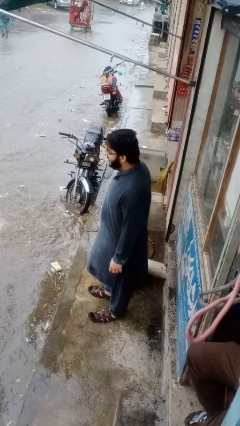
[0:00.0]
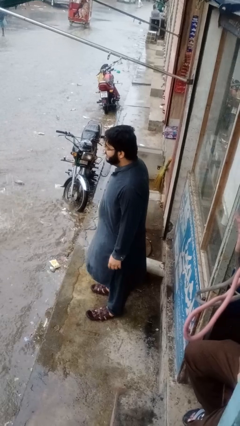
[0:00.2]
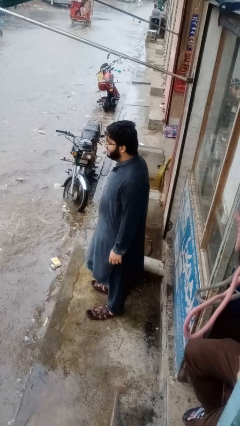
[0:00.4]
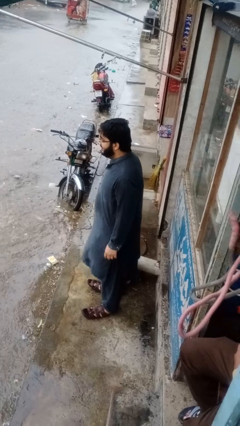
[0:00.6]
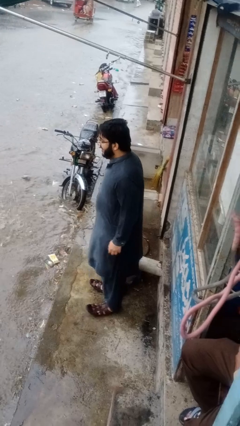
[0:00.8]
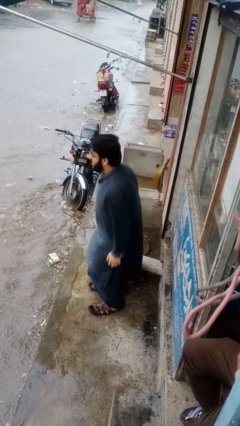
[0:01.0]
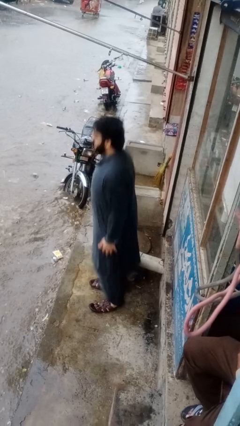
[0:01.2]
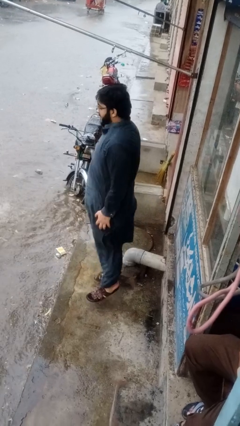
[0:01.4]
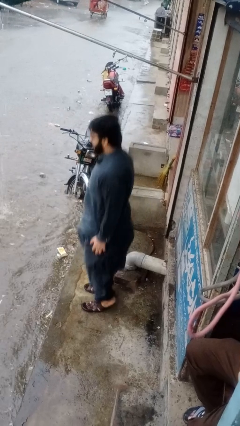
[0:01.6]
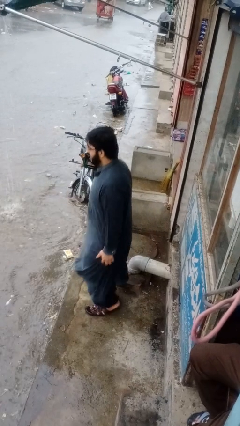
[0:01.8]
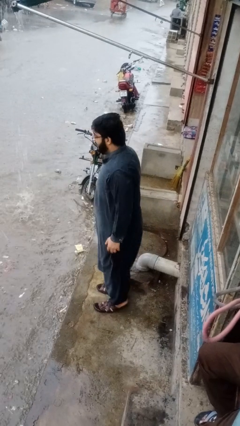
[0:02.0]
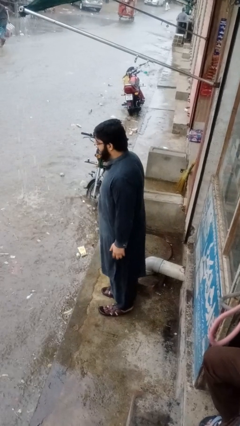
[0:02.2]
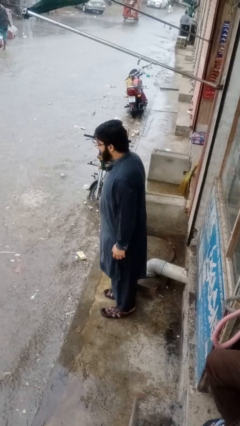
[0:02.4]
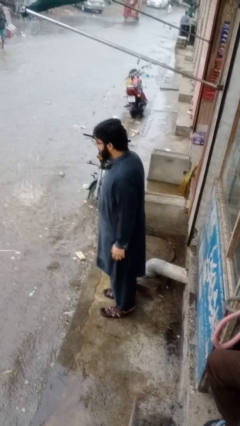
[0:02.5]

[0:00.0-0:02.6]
person jumps

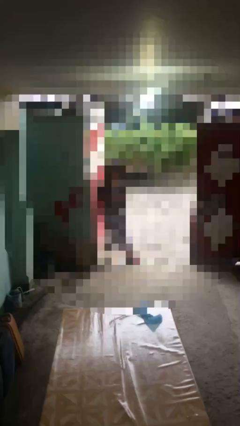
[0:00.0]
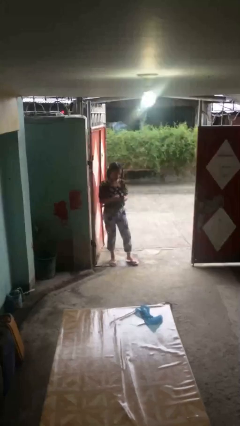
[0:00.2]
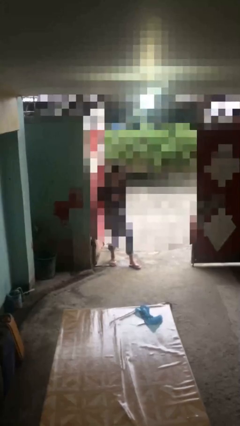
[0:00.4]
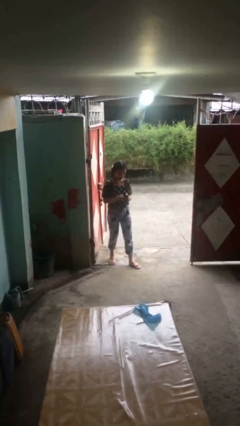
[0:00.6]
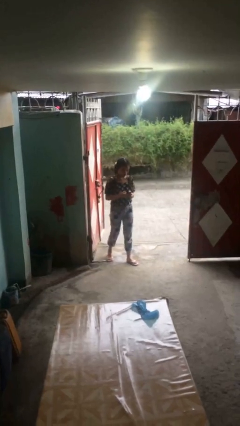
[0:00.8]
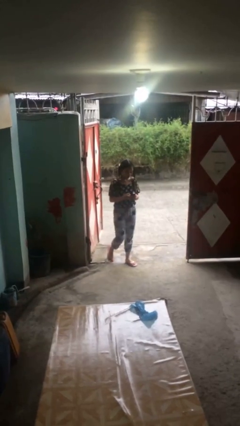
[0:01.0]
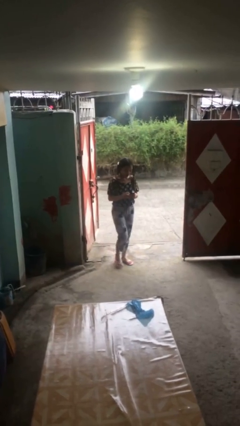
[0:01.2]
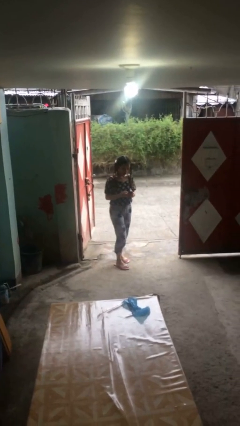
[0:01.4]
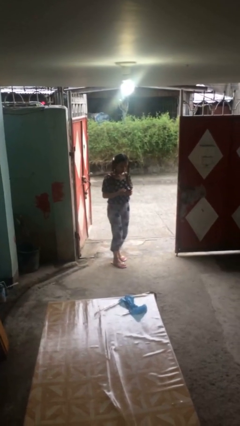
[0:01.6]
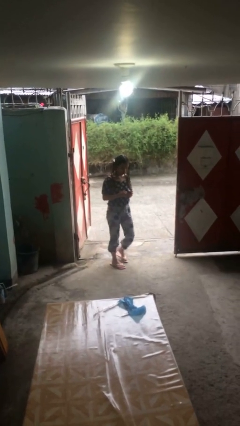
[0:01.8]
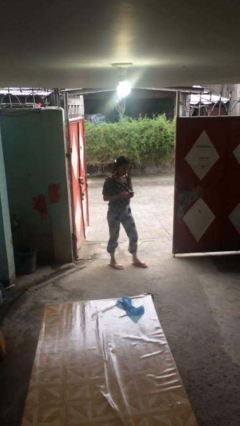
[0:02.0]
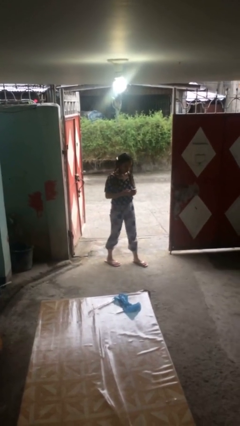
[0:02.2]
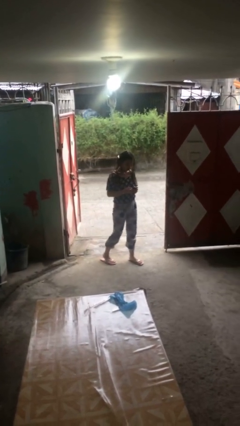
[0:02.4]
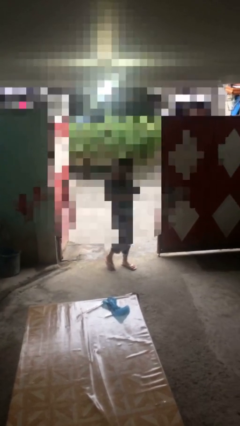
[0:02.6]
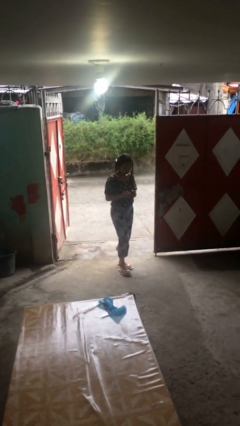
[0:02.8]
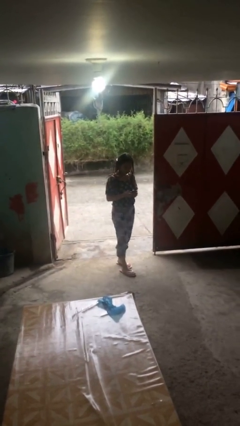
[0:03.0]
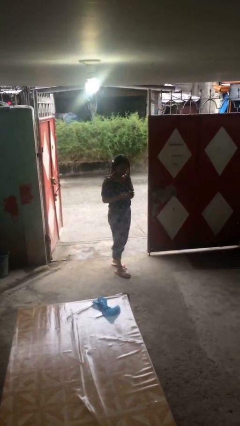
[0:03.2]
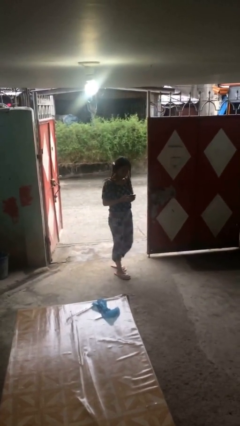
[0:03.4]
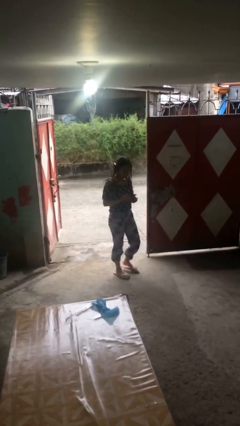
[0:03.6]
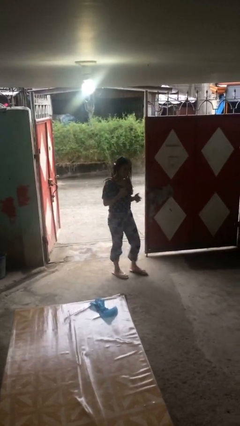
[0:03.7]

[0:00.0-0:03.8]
person texts on phone

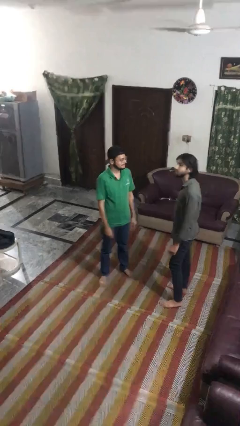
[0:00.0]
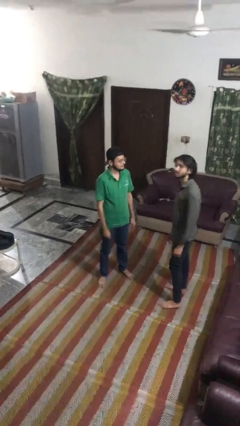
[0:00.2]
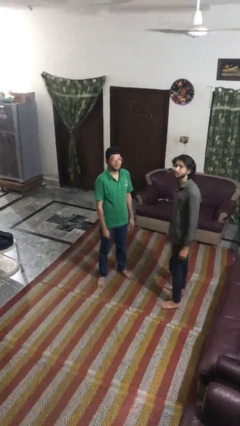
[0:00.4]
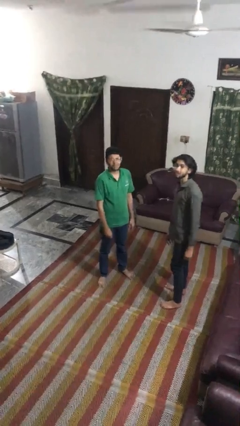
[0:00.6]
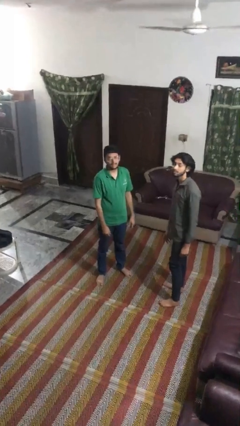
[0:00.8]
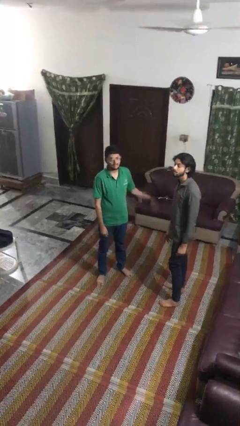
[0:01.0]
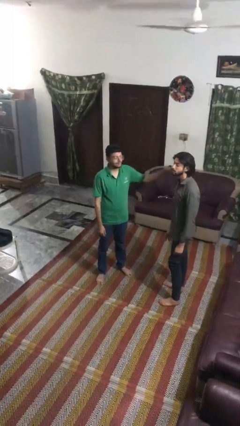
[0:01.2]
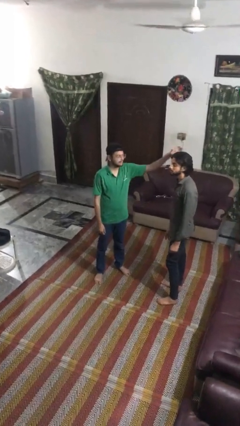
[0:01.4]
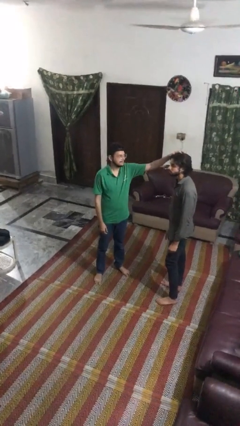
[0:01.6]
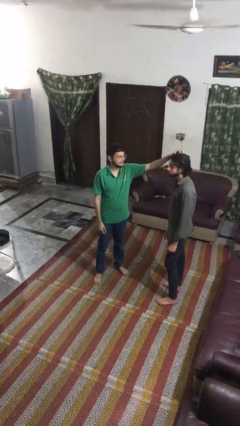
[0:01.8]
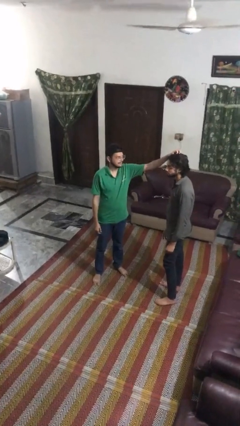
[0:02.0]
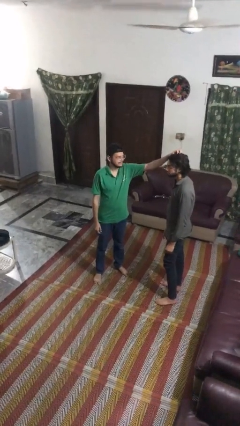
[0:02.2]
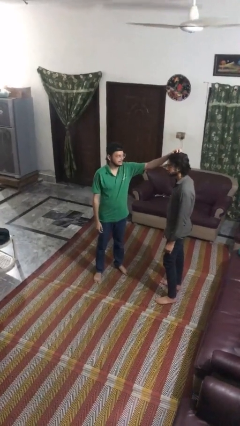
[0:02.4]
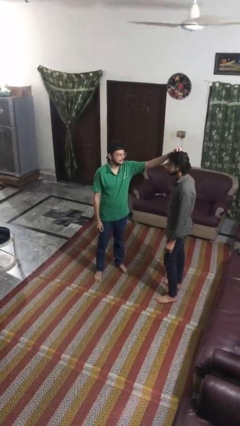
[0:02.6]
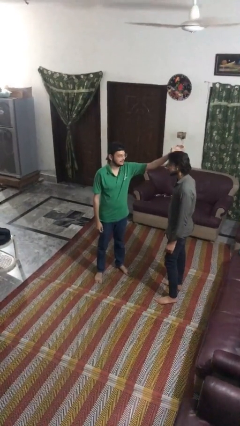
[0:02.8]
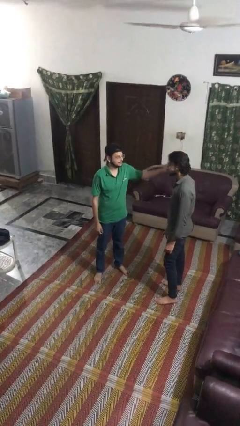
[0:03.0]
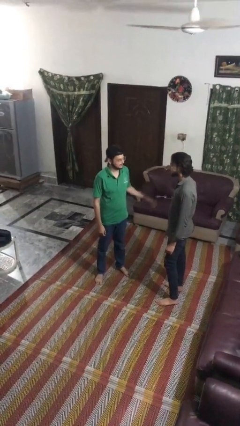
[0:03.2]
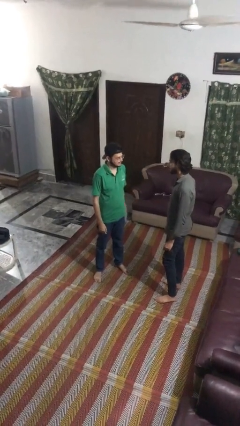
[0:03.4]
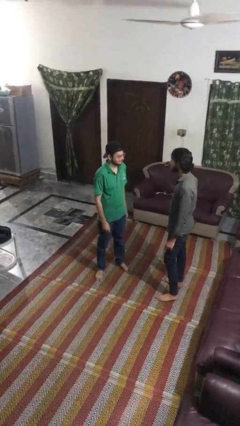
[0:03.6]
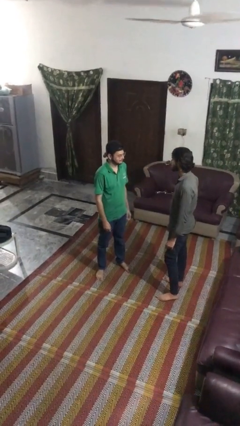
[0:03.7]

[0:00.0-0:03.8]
person grabs person by hair

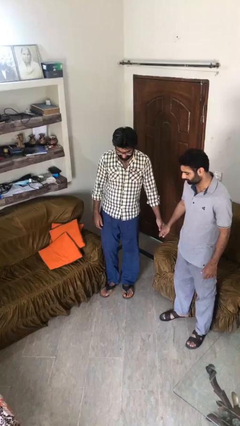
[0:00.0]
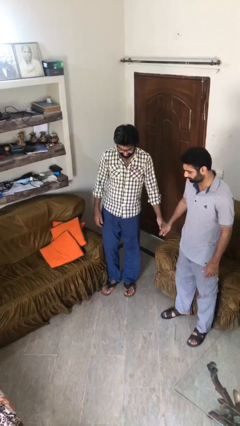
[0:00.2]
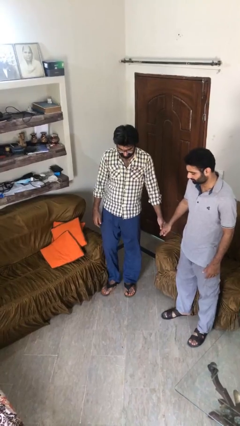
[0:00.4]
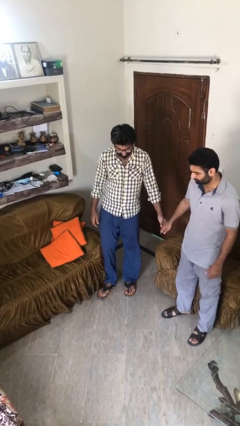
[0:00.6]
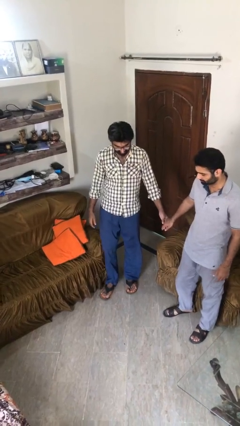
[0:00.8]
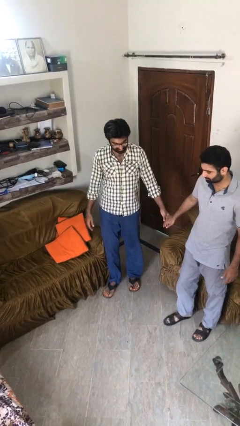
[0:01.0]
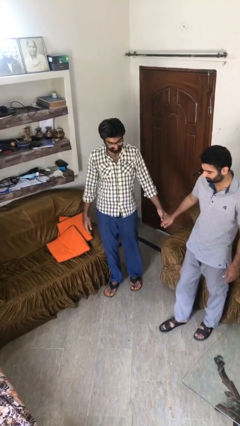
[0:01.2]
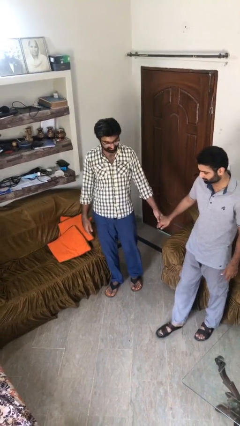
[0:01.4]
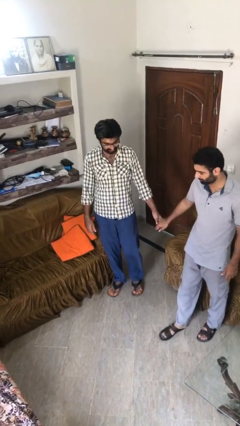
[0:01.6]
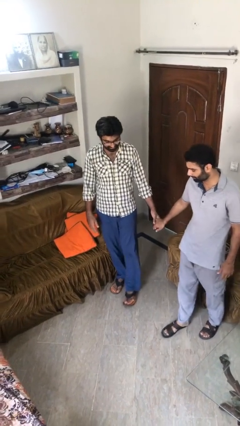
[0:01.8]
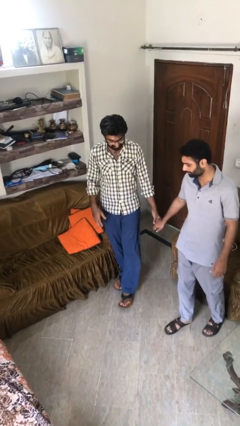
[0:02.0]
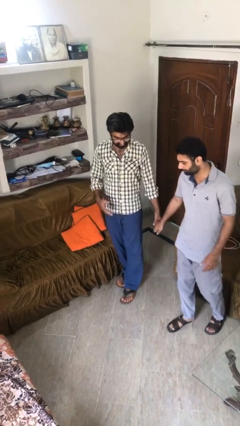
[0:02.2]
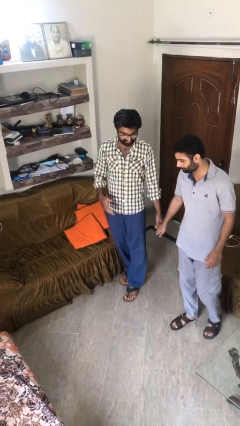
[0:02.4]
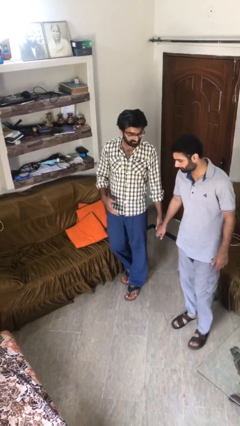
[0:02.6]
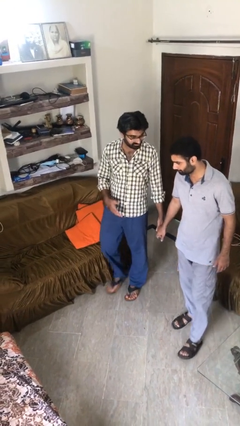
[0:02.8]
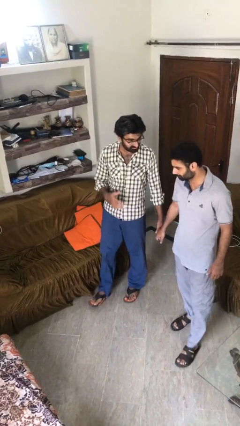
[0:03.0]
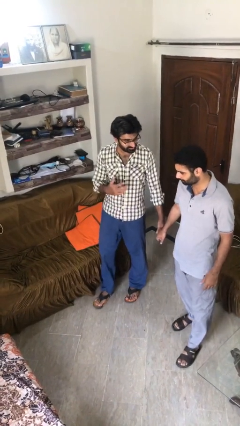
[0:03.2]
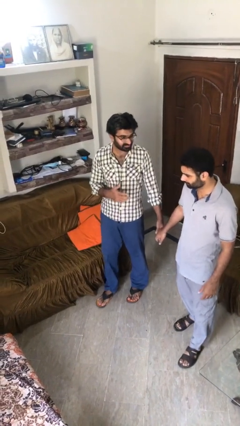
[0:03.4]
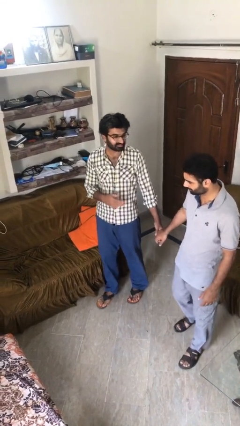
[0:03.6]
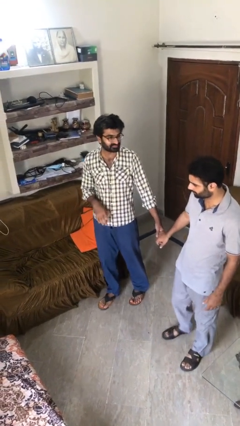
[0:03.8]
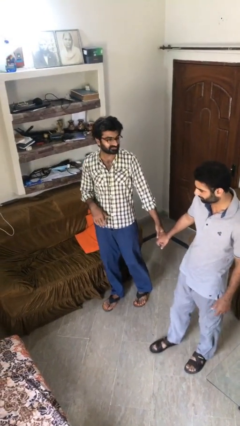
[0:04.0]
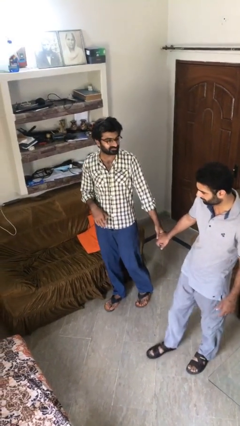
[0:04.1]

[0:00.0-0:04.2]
person holds hand

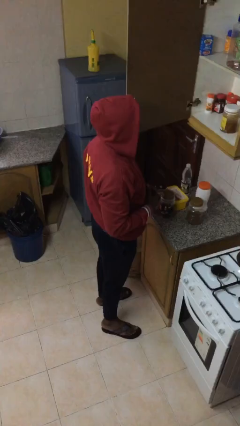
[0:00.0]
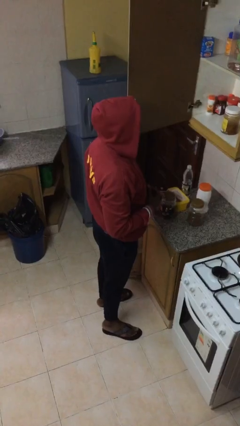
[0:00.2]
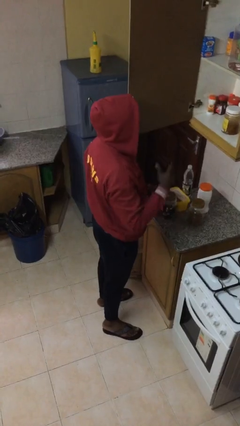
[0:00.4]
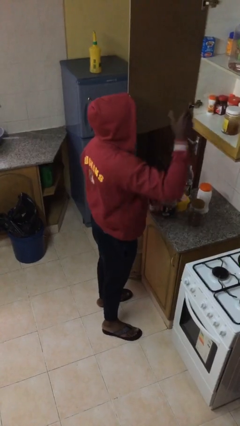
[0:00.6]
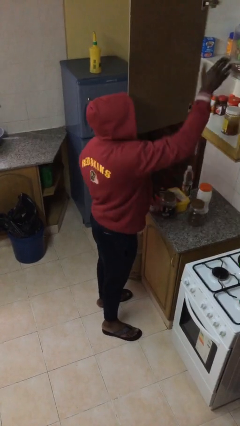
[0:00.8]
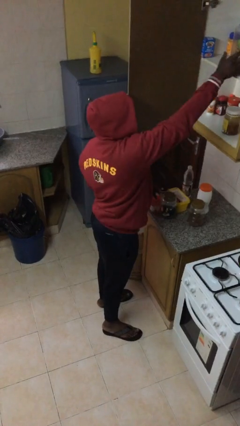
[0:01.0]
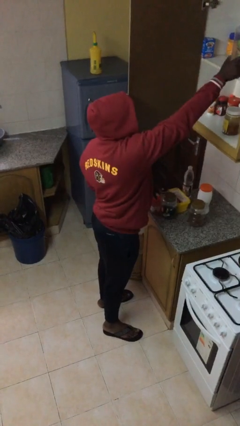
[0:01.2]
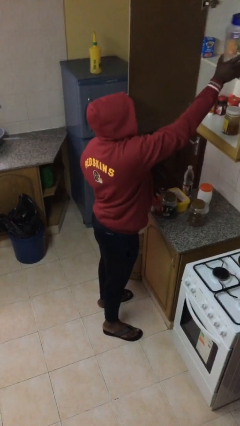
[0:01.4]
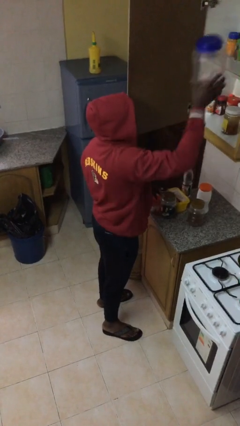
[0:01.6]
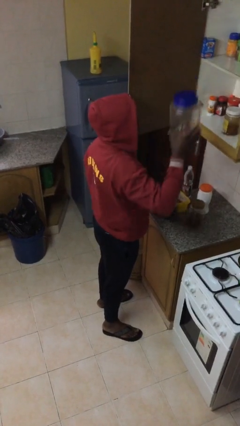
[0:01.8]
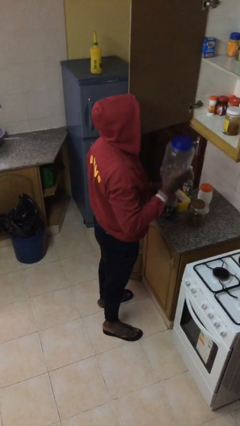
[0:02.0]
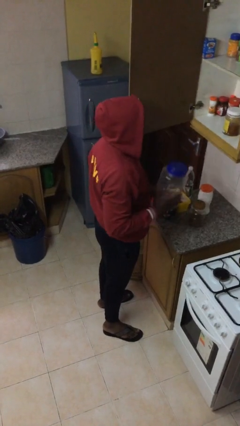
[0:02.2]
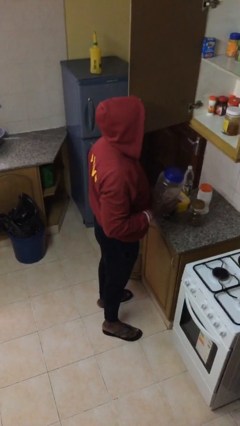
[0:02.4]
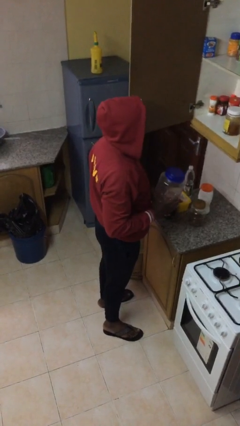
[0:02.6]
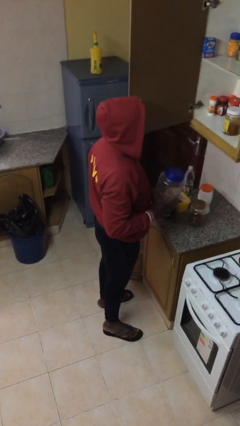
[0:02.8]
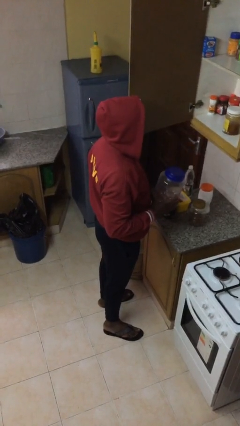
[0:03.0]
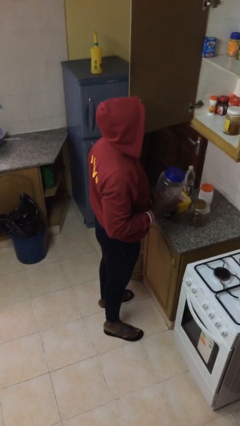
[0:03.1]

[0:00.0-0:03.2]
person picks up object from shelf
